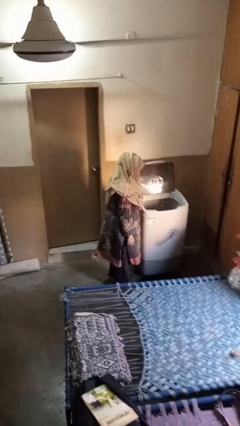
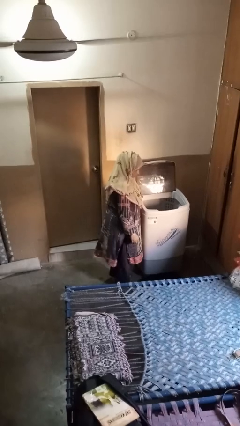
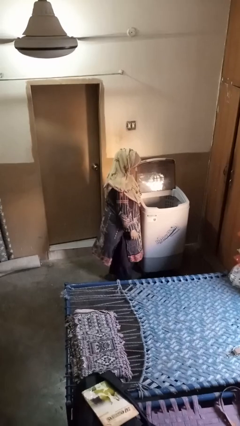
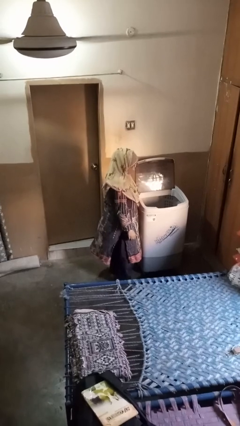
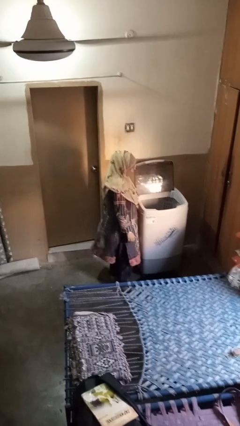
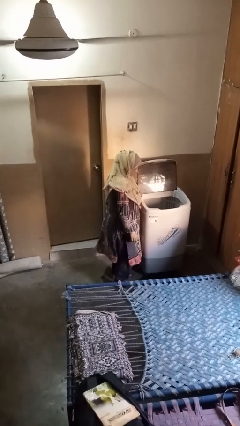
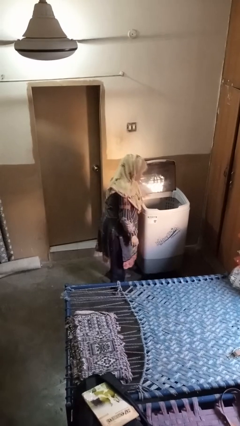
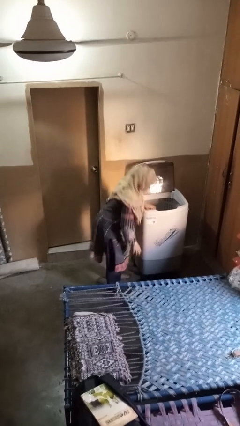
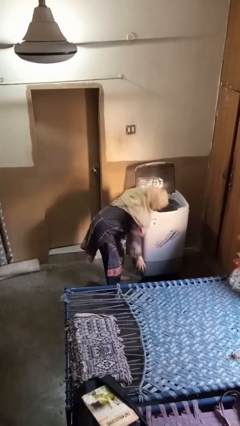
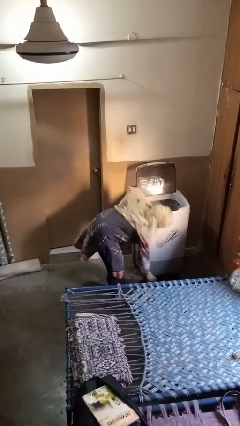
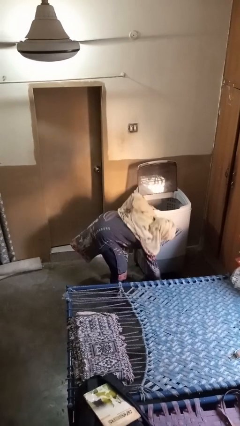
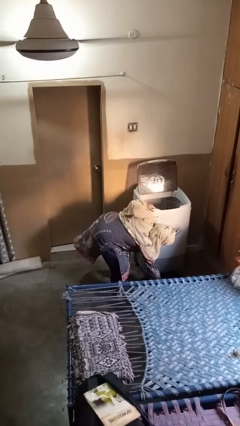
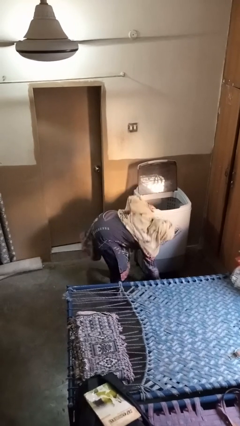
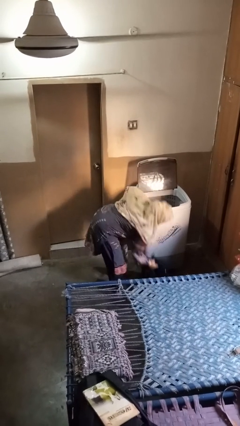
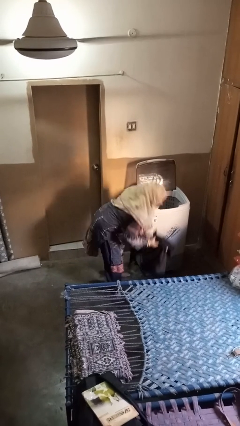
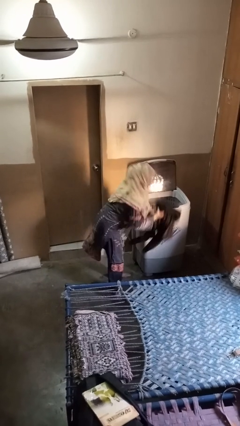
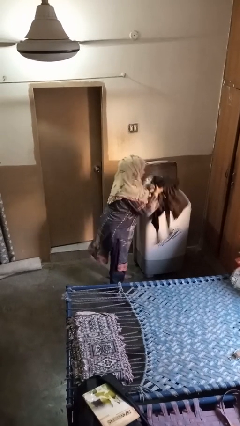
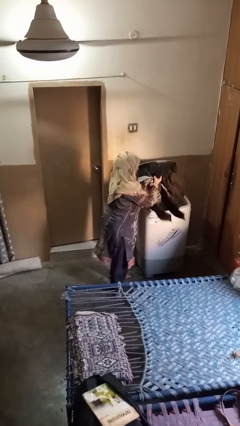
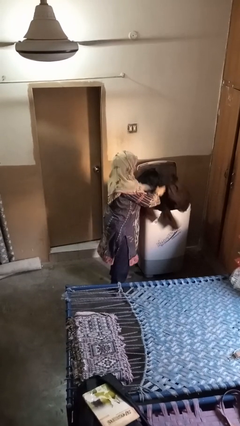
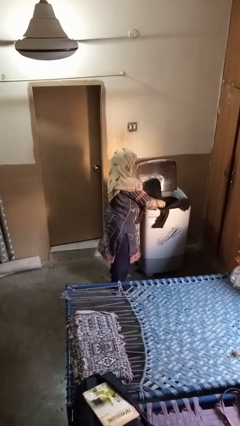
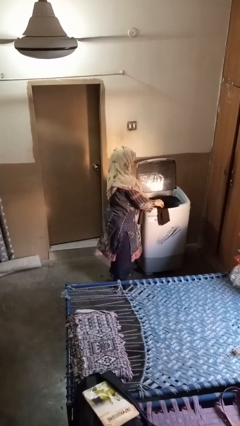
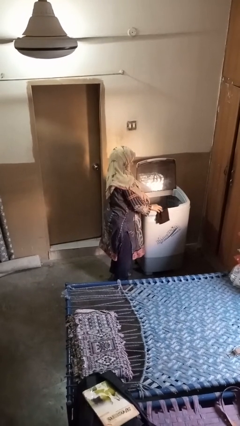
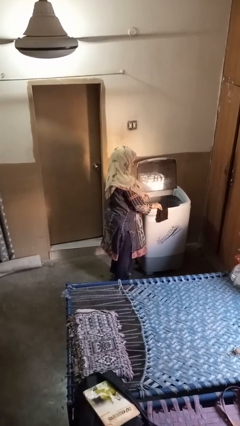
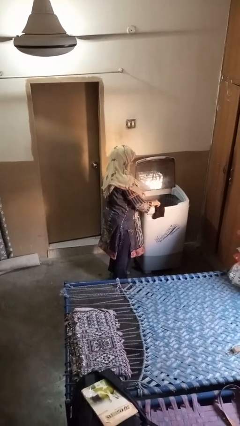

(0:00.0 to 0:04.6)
person loads clotheswasher

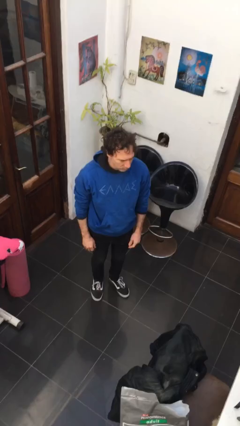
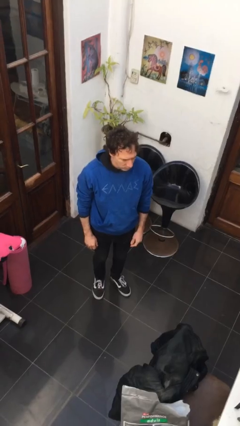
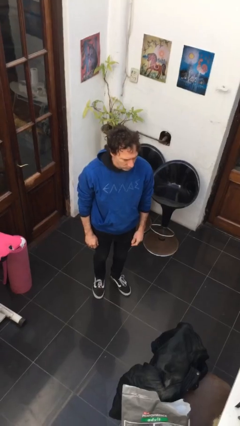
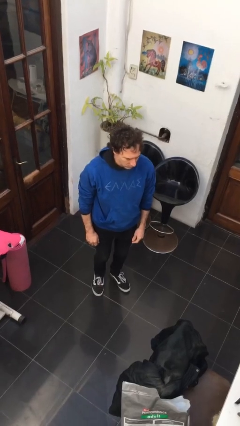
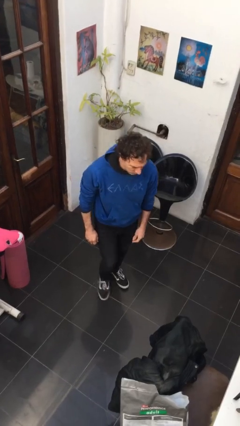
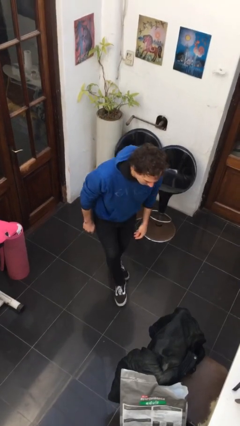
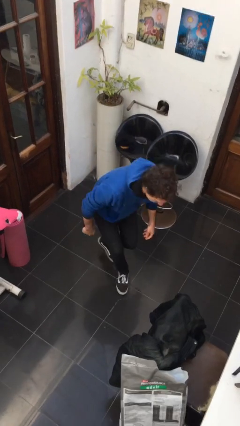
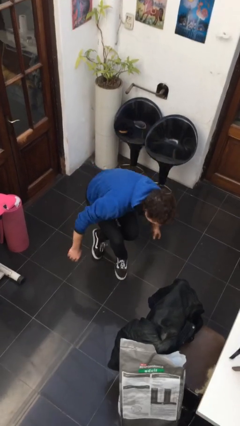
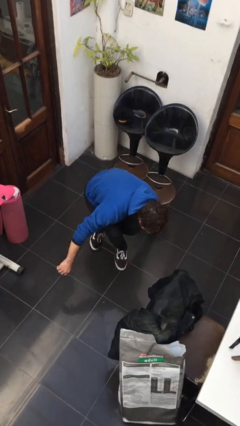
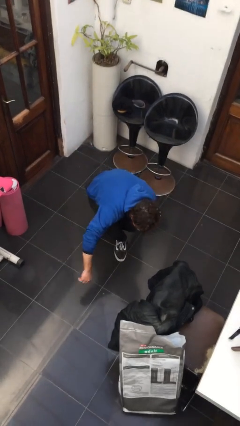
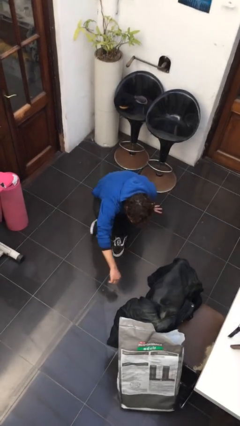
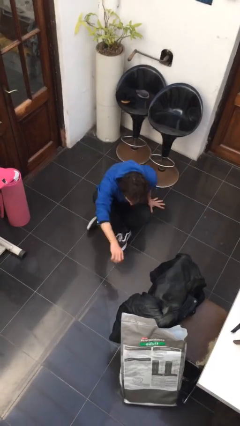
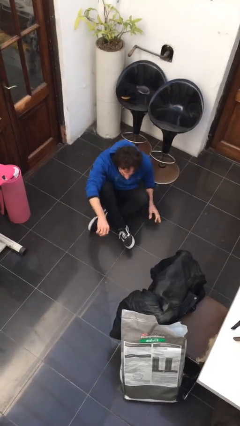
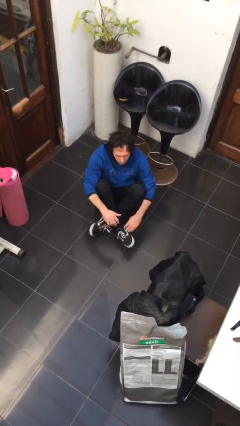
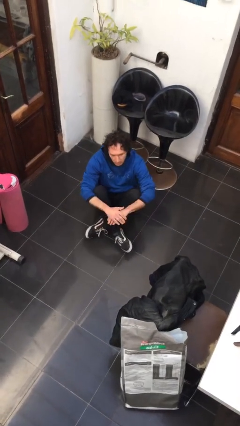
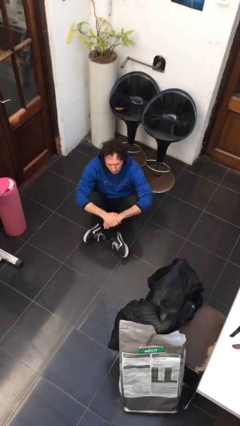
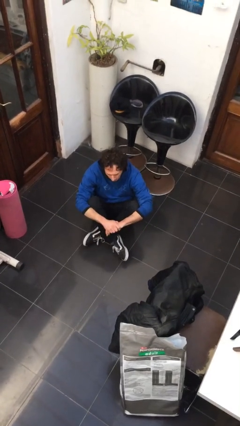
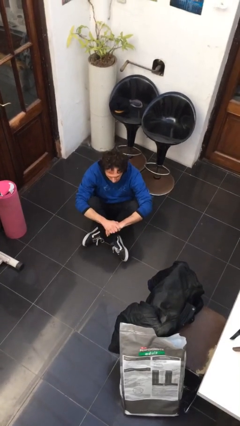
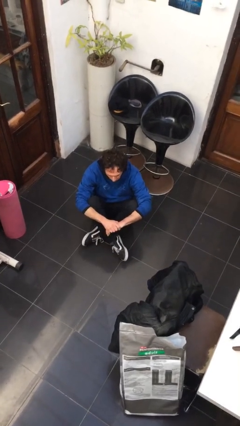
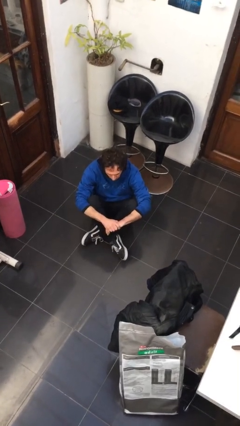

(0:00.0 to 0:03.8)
person sits crisscross

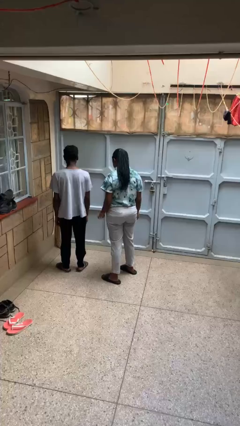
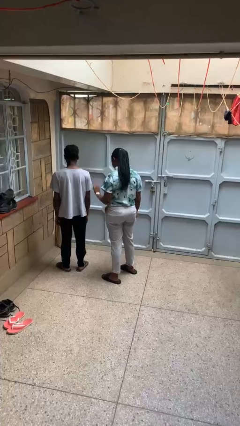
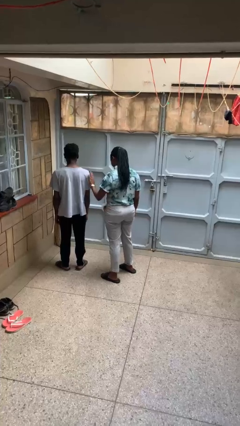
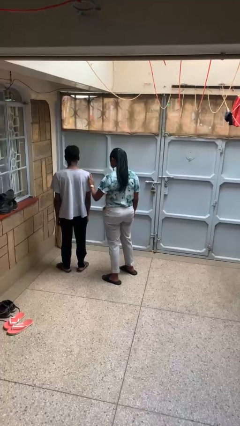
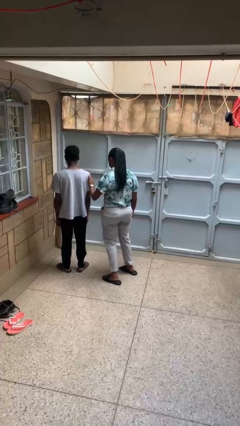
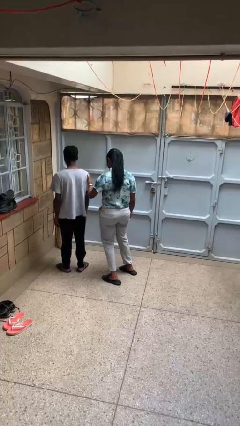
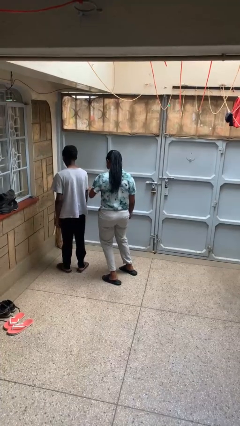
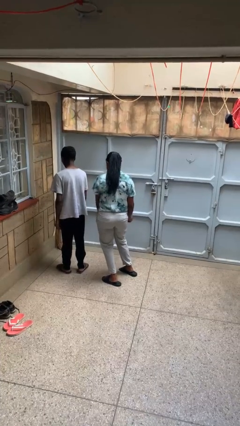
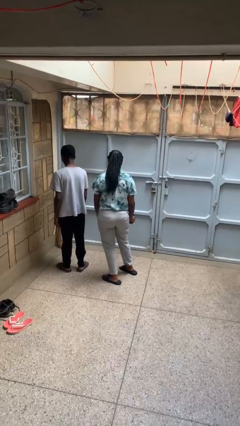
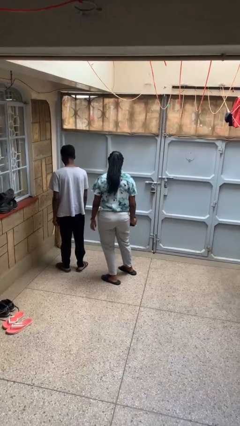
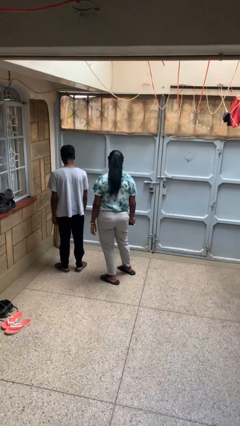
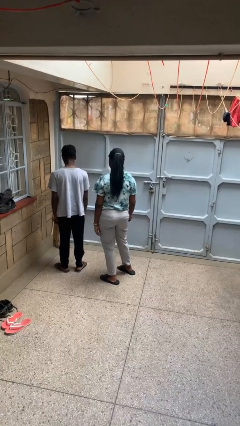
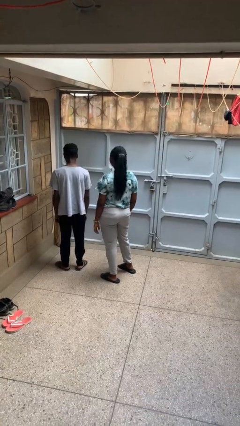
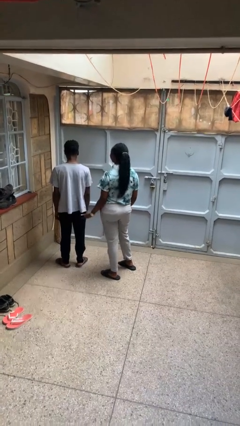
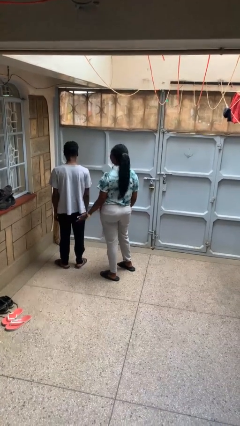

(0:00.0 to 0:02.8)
person shoves person

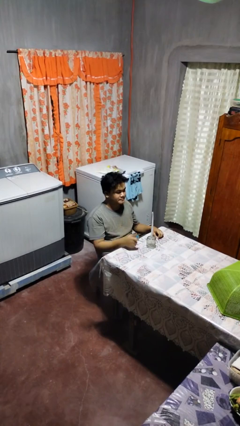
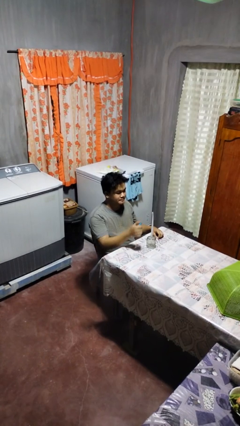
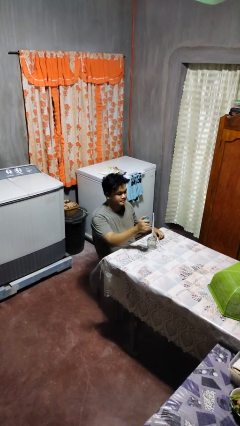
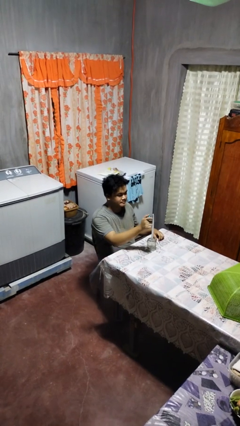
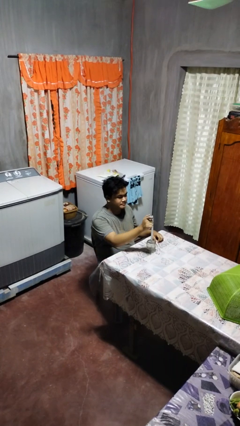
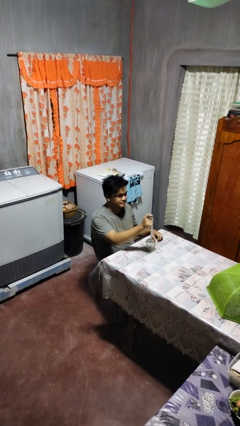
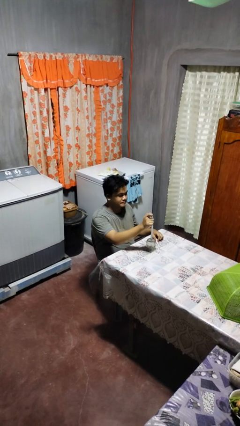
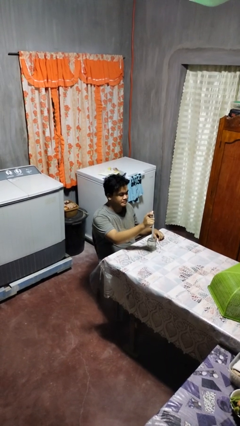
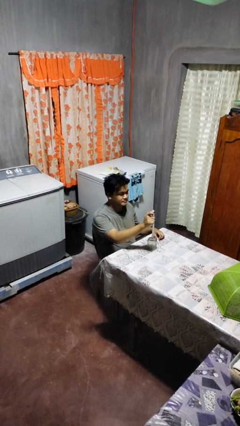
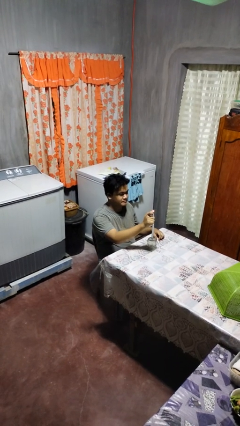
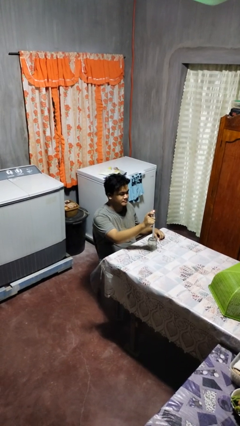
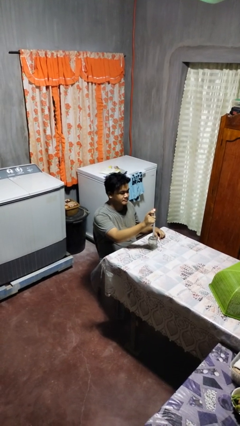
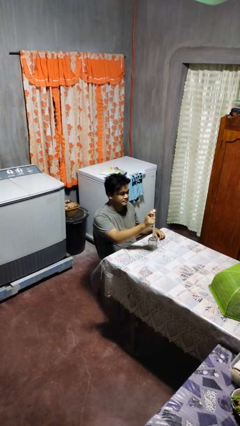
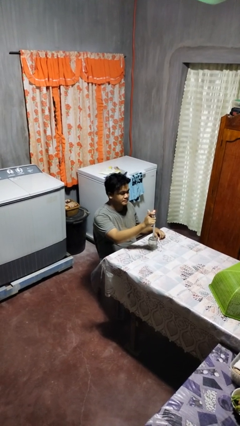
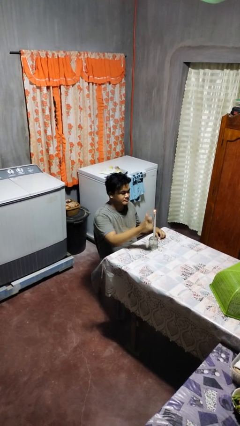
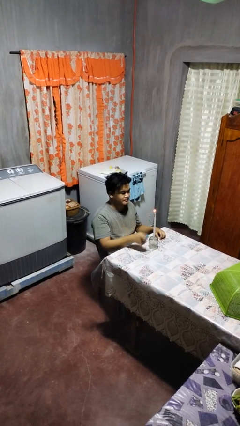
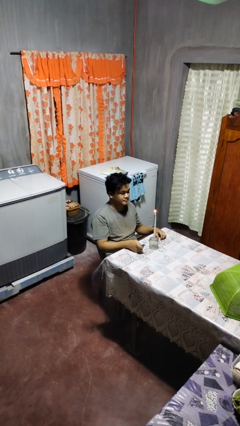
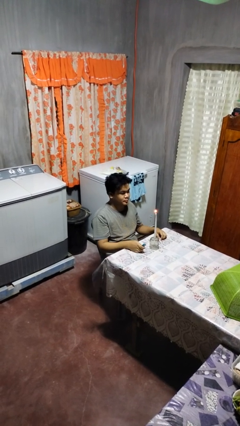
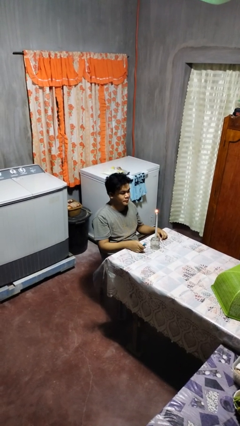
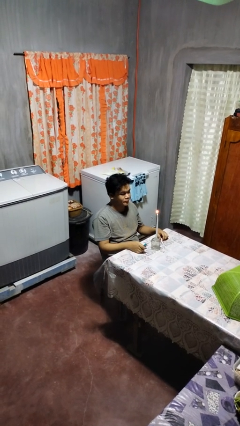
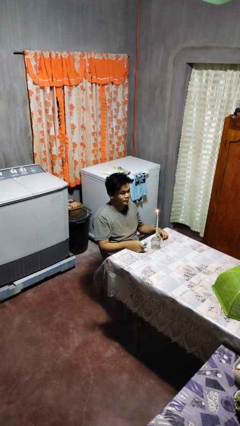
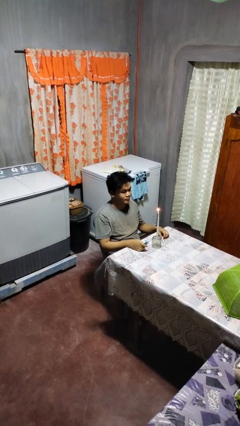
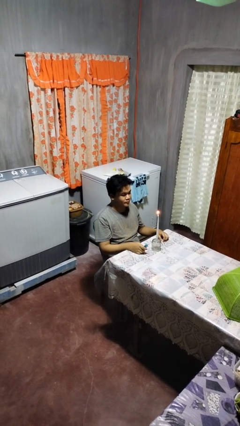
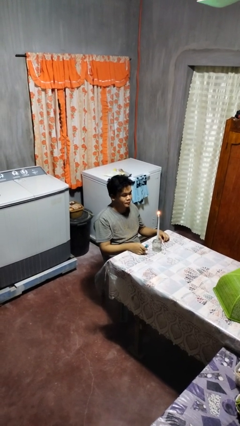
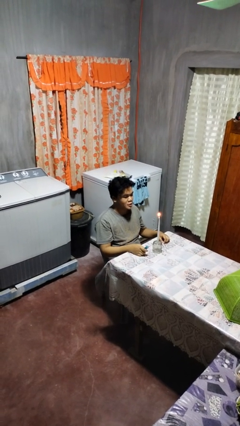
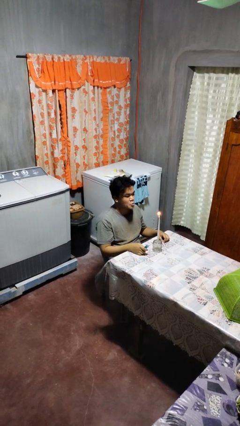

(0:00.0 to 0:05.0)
person lights candle

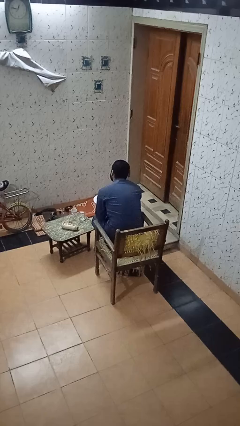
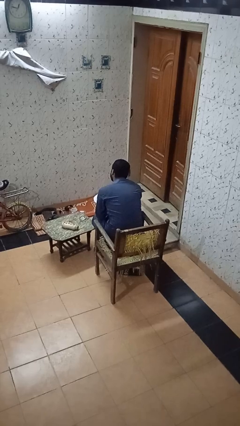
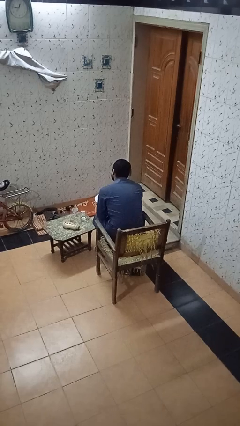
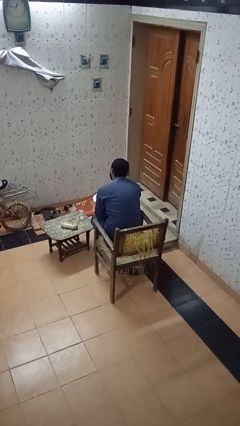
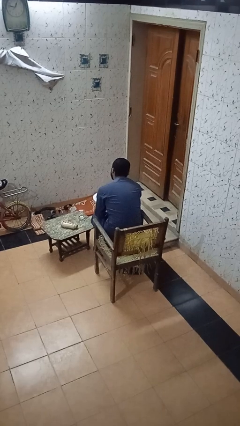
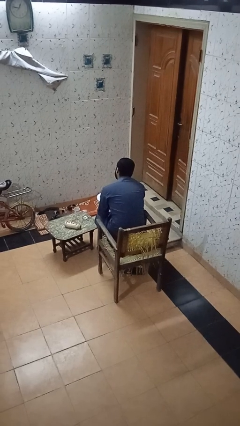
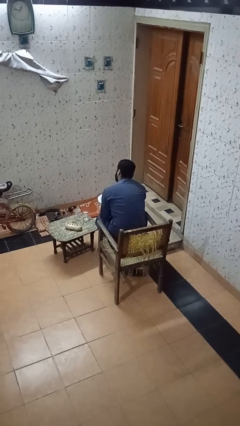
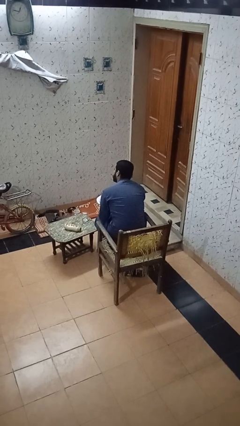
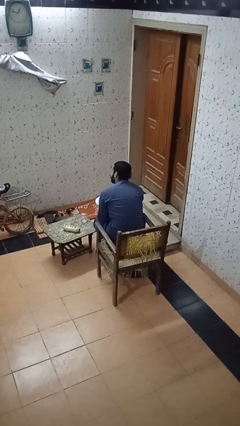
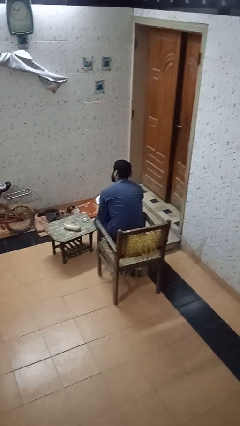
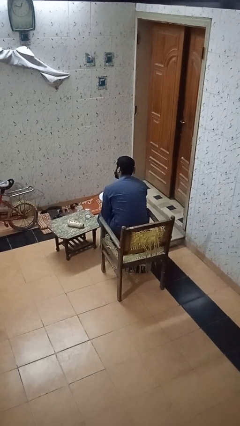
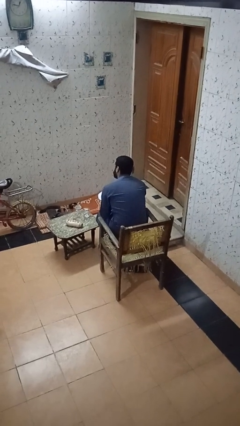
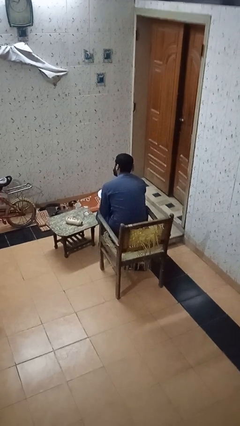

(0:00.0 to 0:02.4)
person eats with hands
